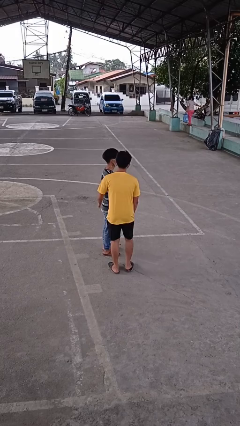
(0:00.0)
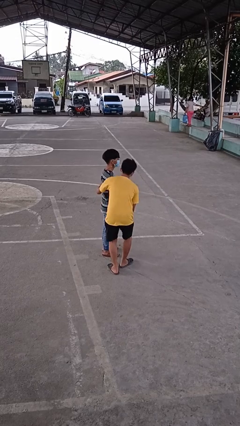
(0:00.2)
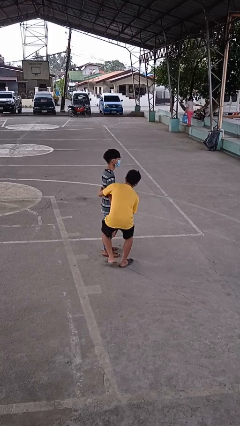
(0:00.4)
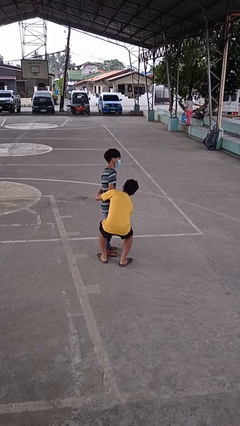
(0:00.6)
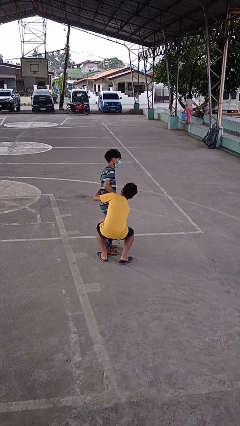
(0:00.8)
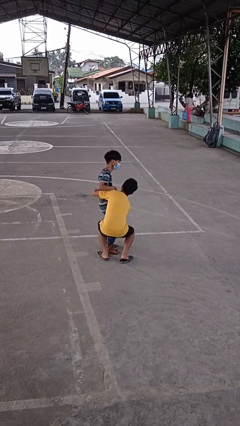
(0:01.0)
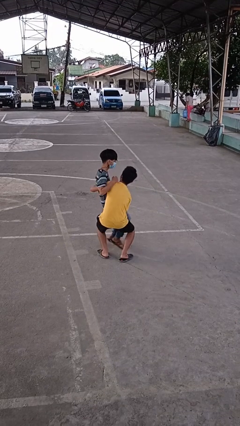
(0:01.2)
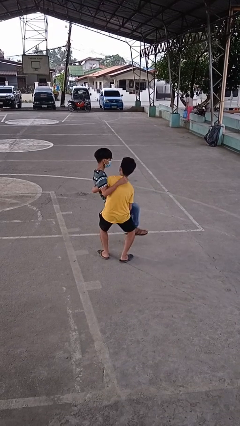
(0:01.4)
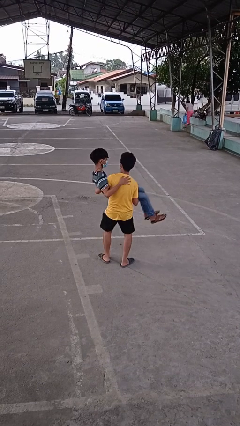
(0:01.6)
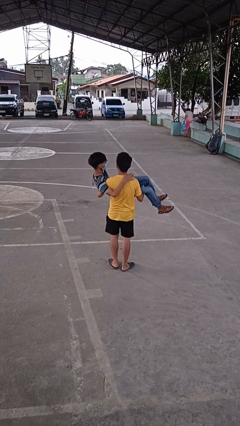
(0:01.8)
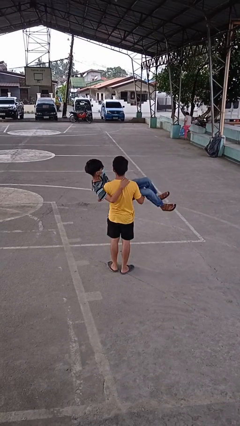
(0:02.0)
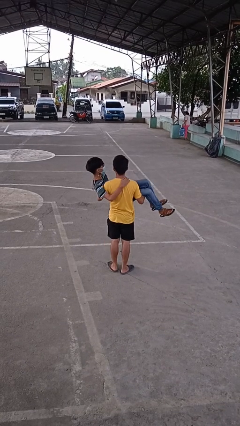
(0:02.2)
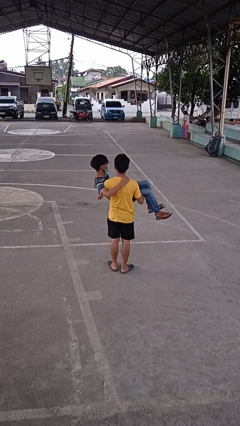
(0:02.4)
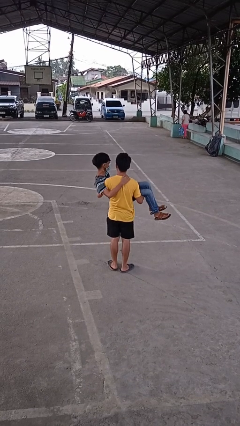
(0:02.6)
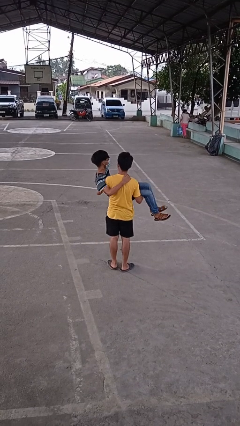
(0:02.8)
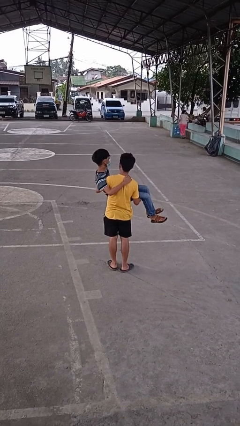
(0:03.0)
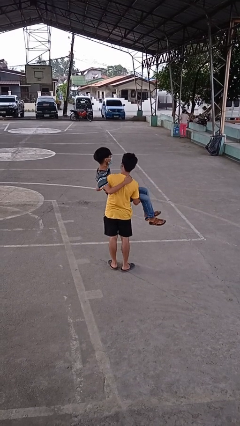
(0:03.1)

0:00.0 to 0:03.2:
person picks up person

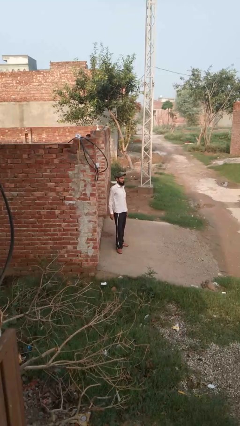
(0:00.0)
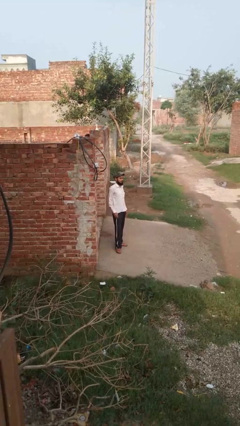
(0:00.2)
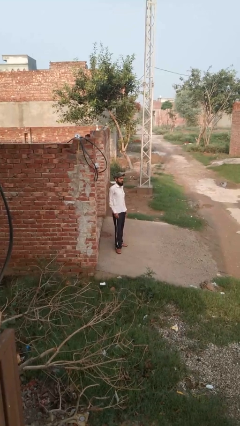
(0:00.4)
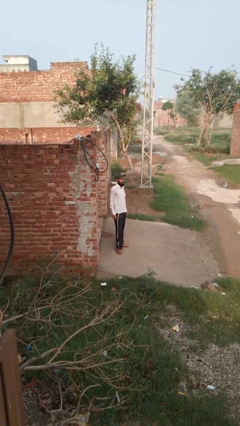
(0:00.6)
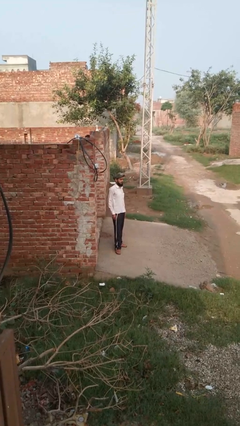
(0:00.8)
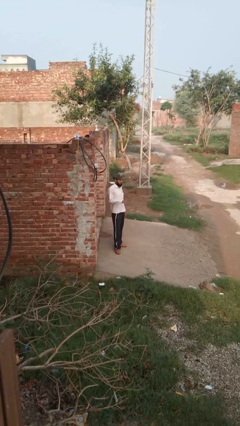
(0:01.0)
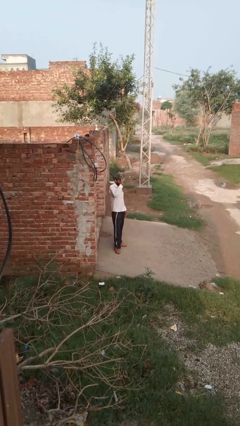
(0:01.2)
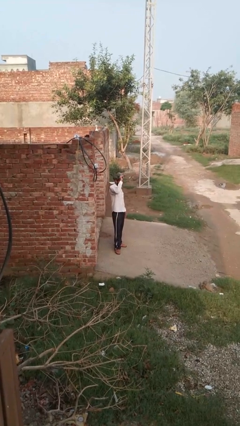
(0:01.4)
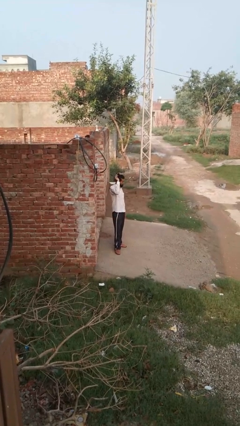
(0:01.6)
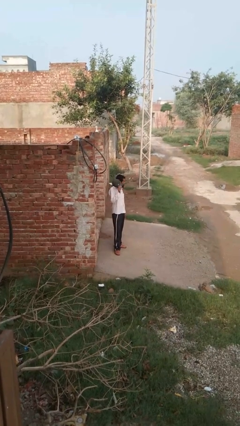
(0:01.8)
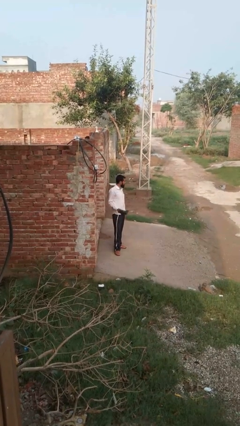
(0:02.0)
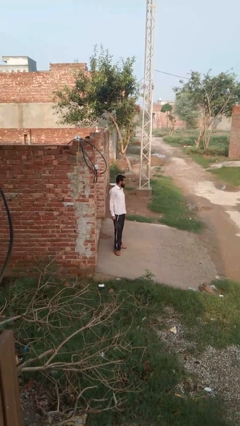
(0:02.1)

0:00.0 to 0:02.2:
person takes off hat

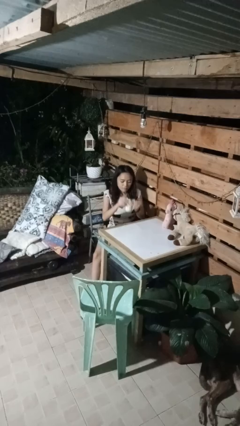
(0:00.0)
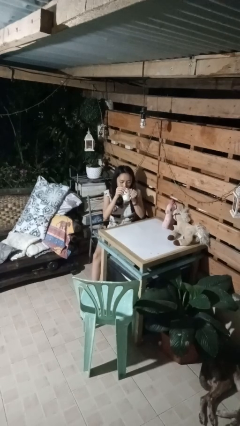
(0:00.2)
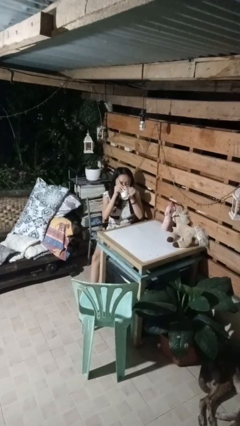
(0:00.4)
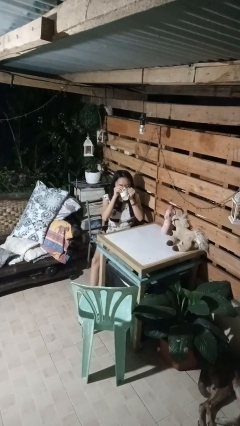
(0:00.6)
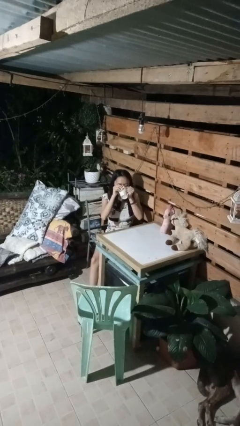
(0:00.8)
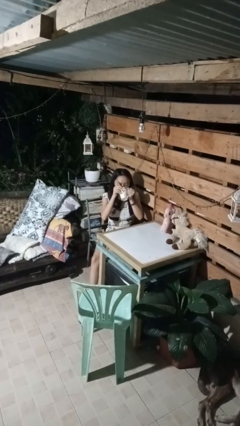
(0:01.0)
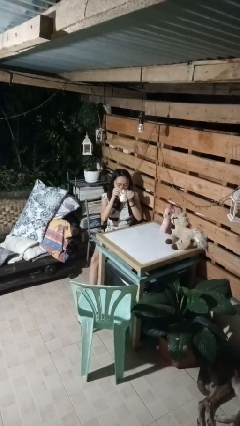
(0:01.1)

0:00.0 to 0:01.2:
person drinks from mug

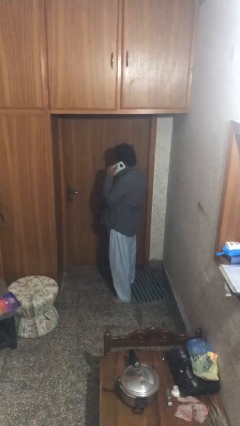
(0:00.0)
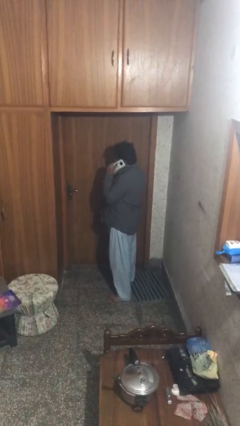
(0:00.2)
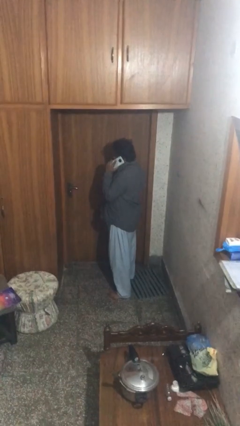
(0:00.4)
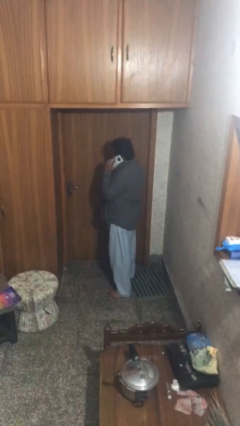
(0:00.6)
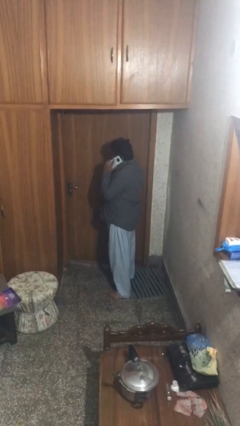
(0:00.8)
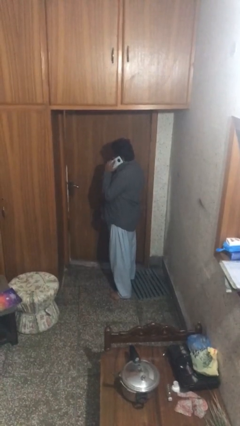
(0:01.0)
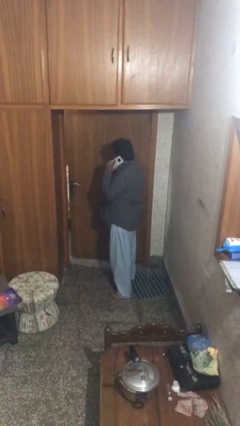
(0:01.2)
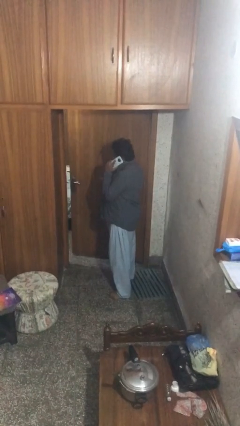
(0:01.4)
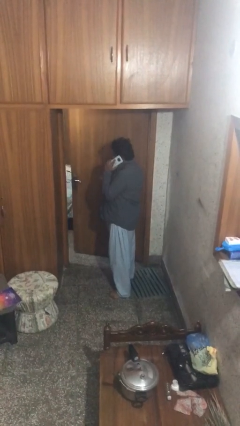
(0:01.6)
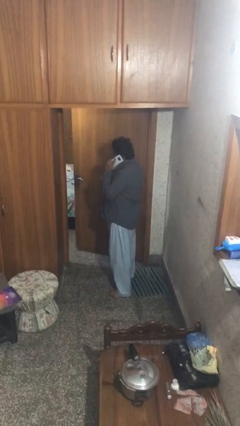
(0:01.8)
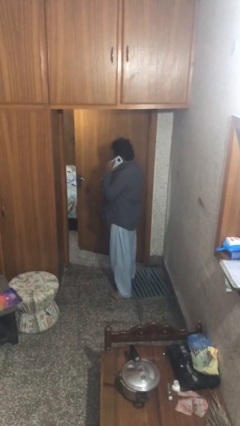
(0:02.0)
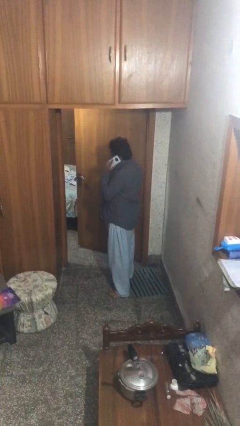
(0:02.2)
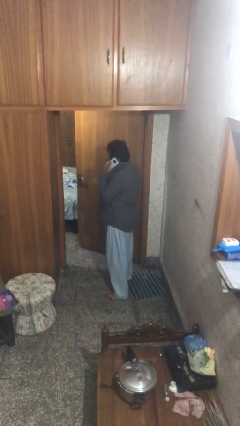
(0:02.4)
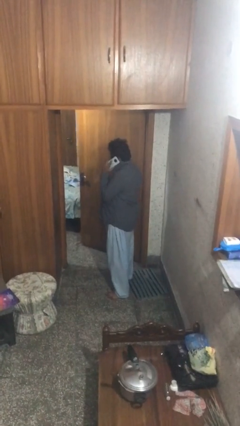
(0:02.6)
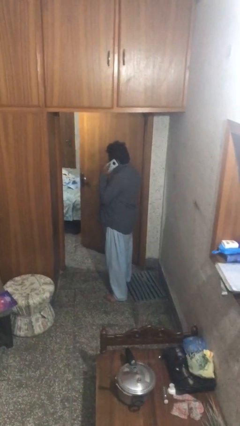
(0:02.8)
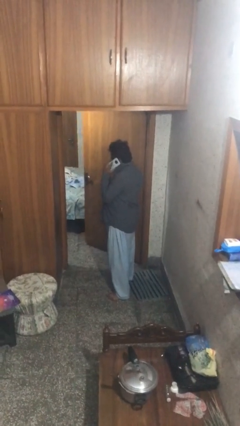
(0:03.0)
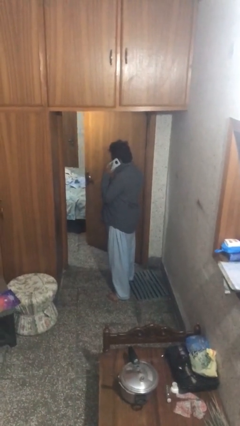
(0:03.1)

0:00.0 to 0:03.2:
person opens facility door

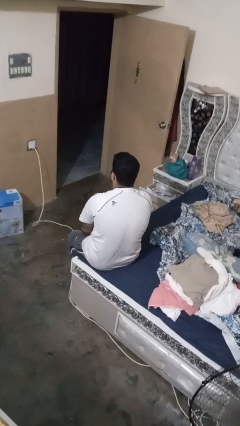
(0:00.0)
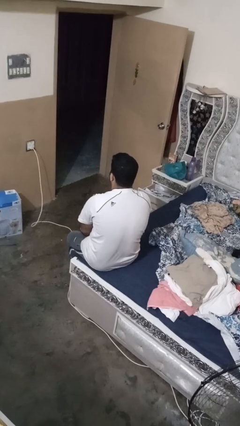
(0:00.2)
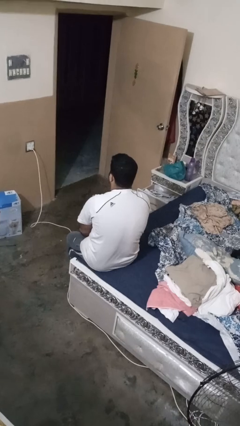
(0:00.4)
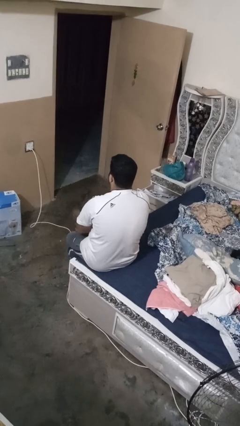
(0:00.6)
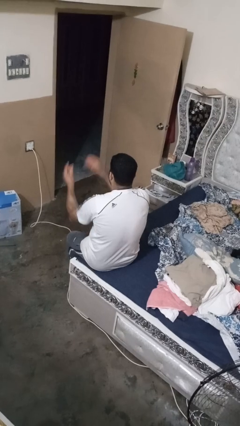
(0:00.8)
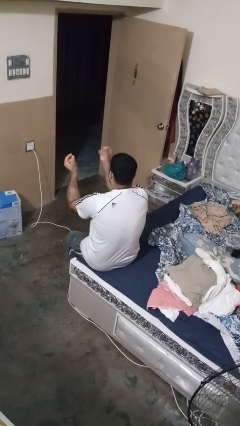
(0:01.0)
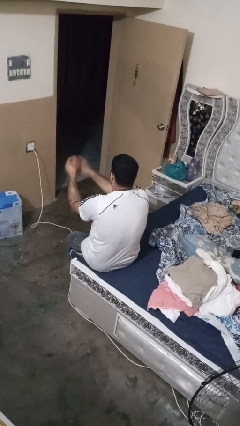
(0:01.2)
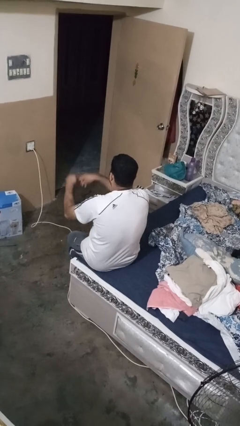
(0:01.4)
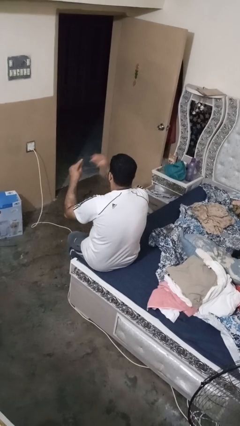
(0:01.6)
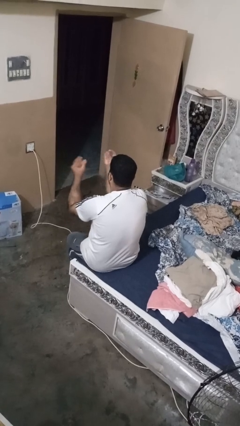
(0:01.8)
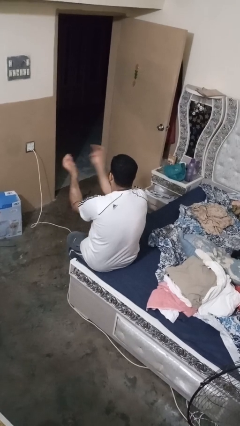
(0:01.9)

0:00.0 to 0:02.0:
person snaps fingers

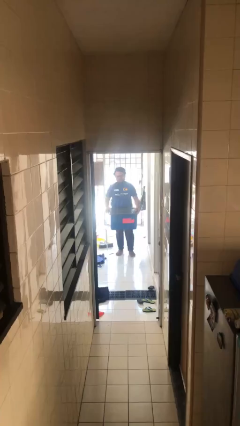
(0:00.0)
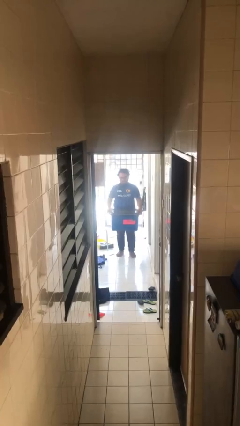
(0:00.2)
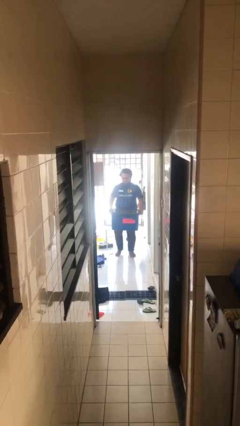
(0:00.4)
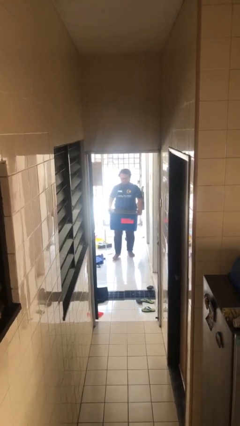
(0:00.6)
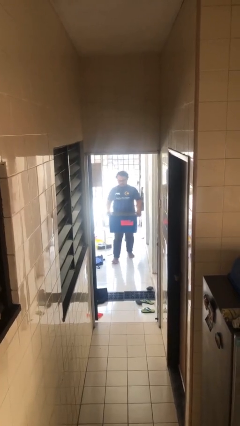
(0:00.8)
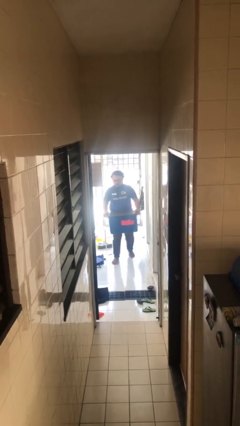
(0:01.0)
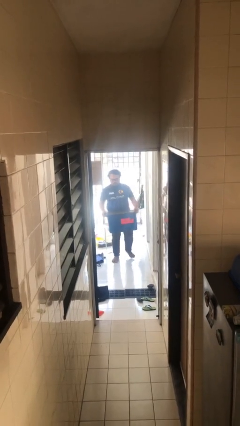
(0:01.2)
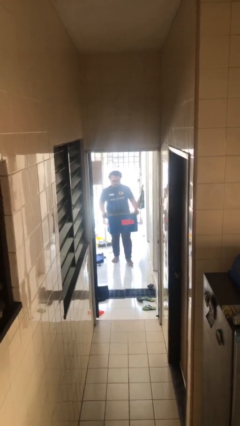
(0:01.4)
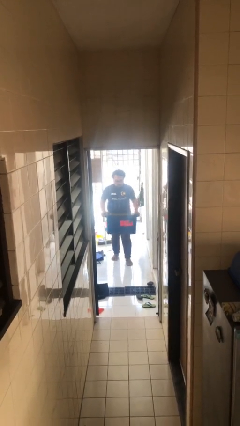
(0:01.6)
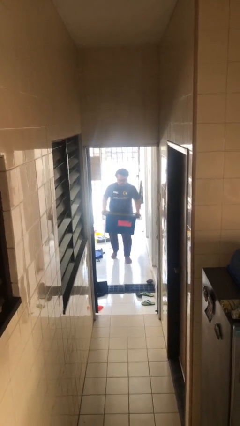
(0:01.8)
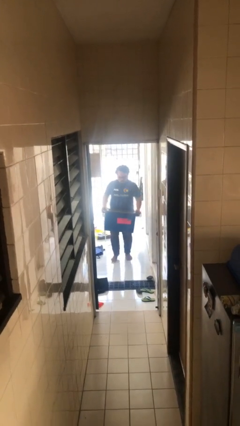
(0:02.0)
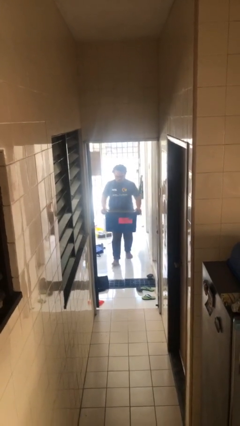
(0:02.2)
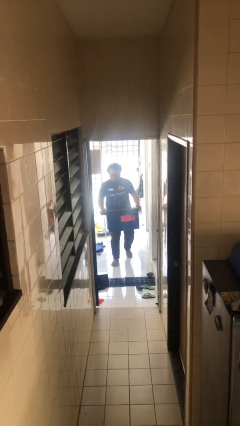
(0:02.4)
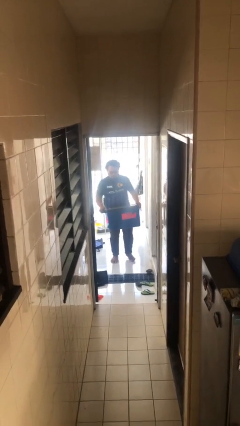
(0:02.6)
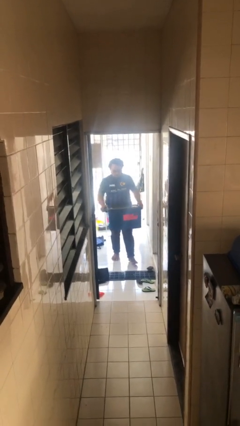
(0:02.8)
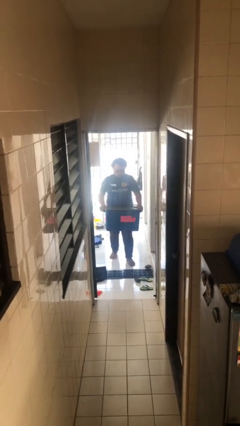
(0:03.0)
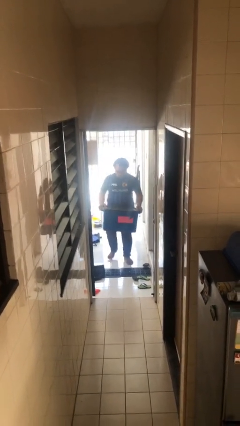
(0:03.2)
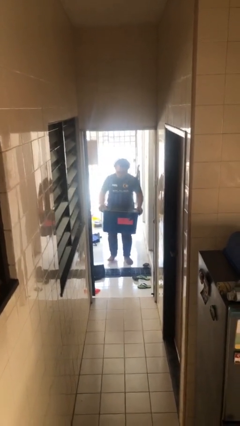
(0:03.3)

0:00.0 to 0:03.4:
person carries heavy object

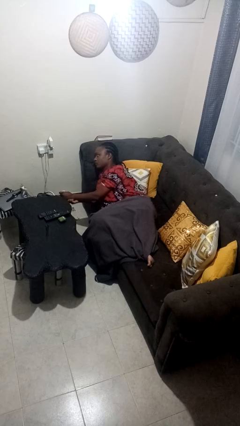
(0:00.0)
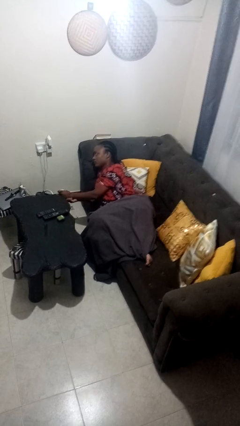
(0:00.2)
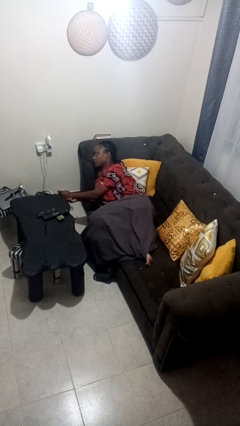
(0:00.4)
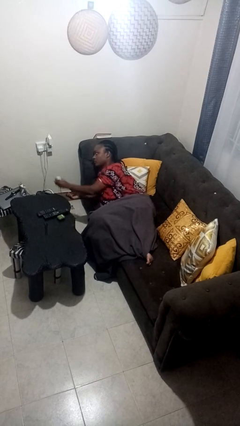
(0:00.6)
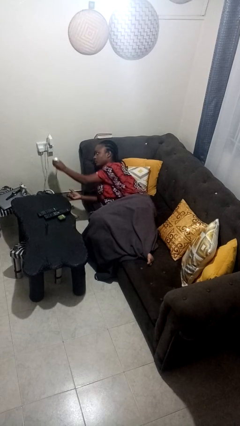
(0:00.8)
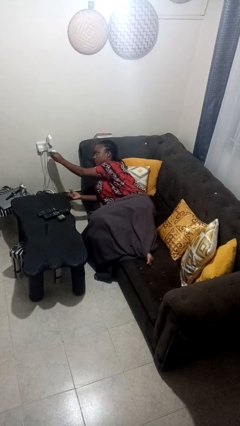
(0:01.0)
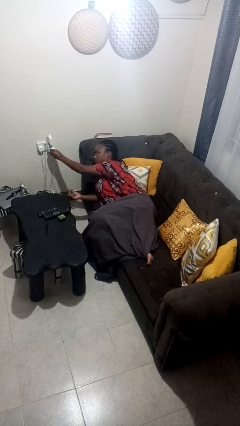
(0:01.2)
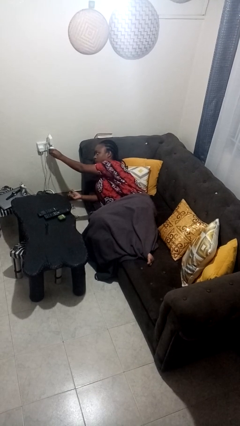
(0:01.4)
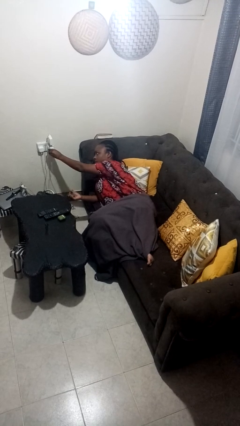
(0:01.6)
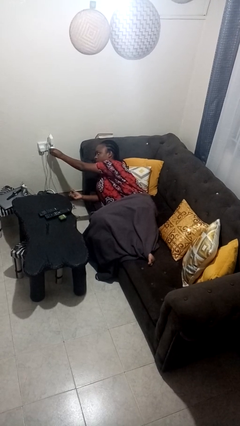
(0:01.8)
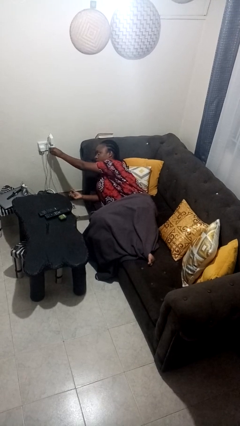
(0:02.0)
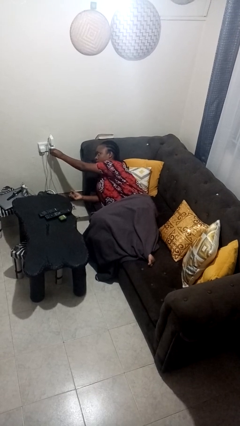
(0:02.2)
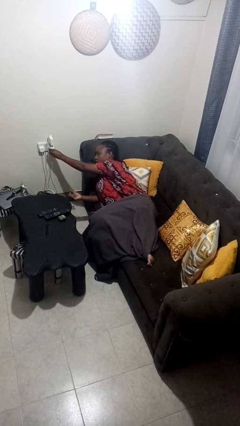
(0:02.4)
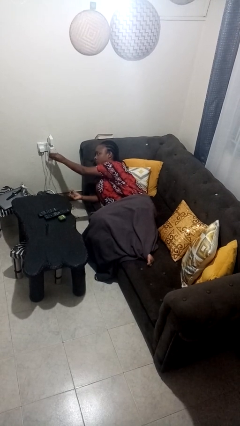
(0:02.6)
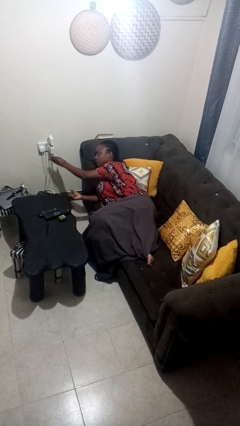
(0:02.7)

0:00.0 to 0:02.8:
person plugs into electrical socket
